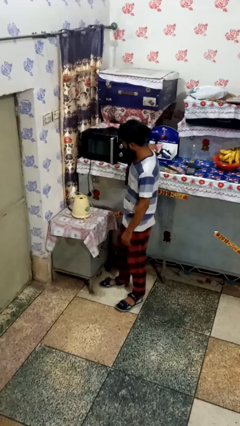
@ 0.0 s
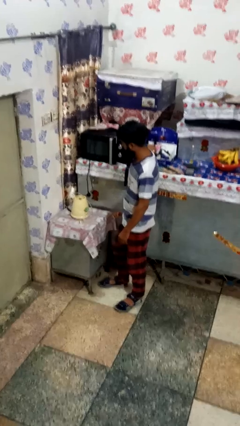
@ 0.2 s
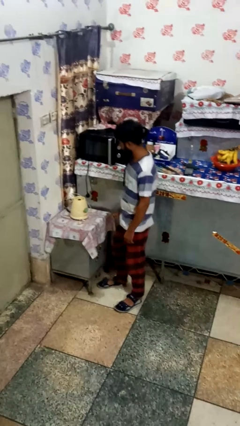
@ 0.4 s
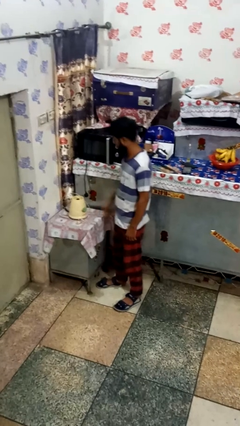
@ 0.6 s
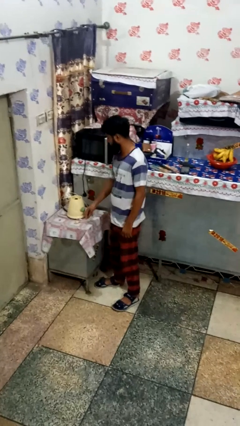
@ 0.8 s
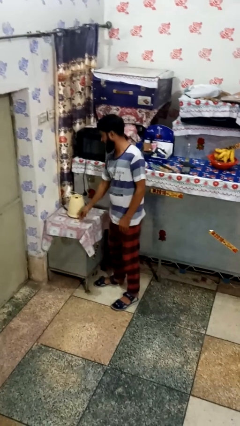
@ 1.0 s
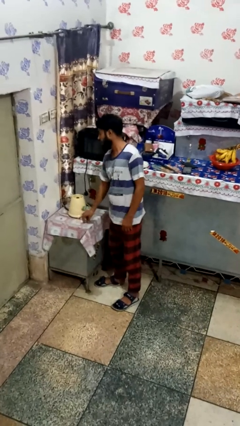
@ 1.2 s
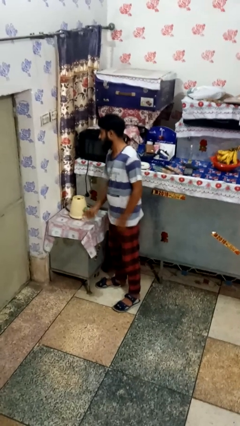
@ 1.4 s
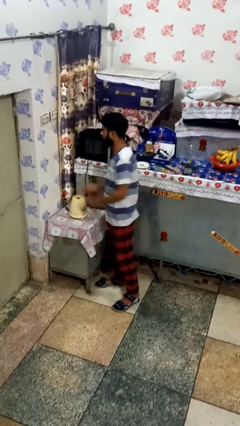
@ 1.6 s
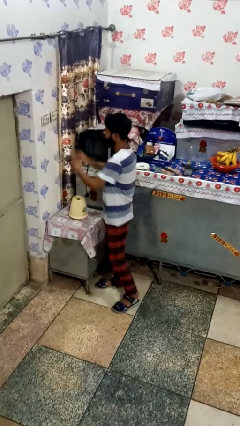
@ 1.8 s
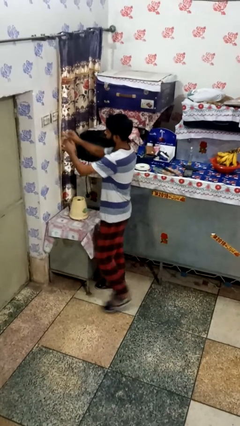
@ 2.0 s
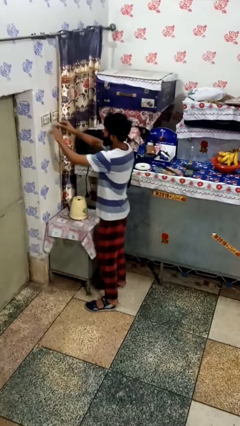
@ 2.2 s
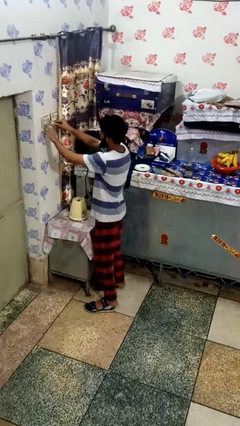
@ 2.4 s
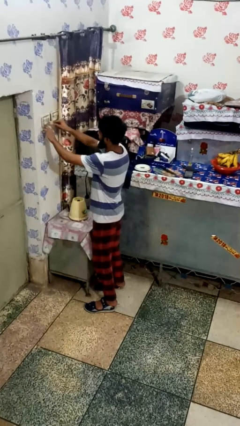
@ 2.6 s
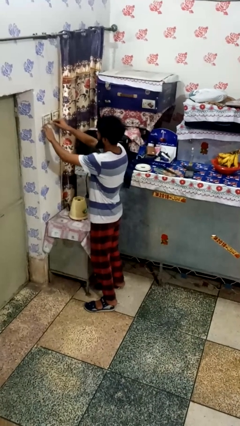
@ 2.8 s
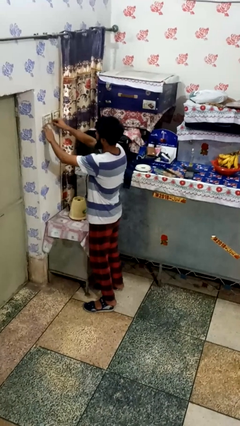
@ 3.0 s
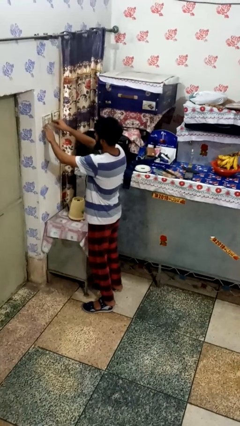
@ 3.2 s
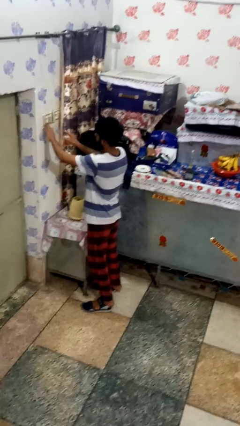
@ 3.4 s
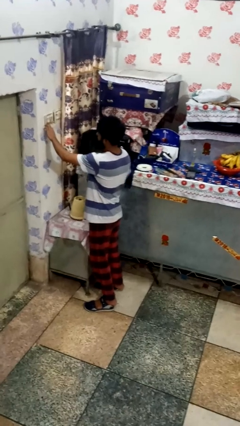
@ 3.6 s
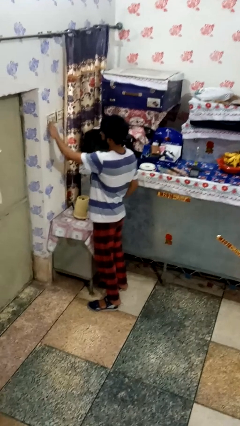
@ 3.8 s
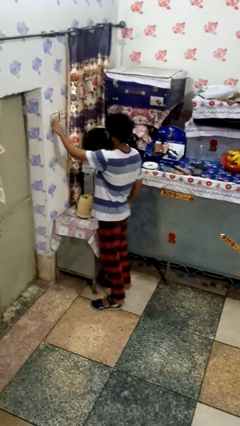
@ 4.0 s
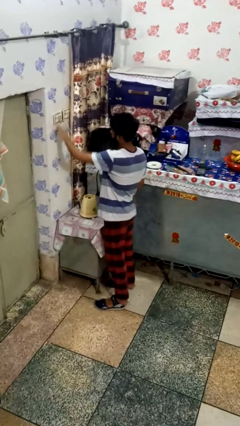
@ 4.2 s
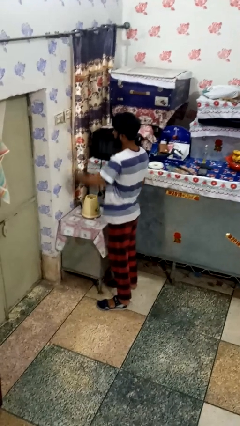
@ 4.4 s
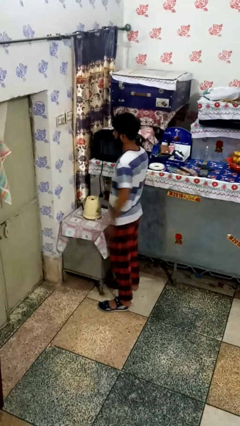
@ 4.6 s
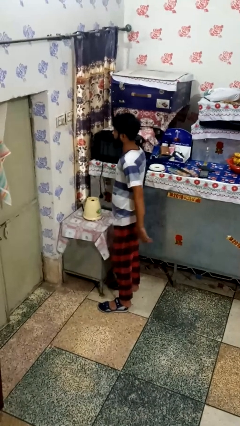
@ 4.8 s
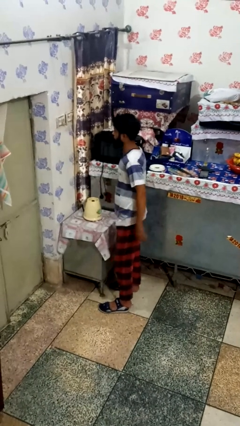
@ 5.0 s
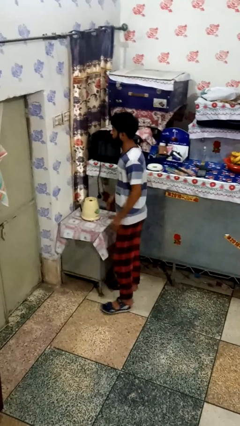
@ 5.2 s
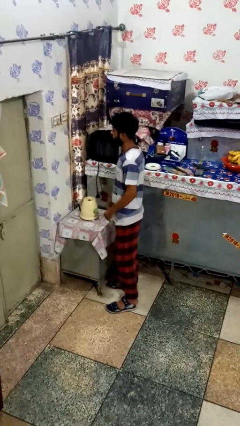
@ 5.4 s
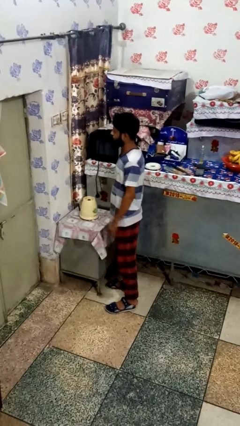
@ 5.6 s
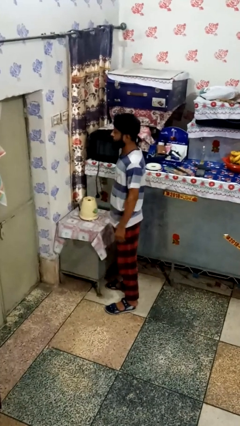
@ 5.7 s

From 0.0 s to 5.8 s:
person plugs into electrical socket

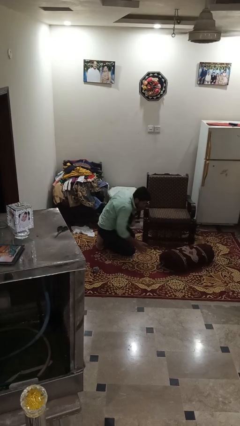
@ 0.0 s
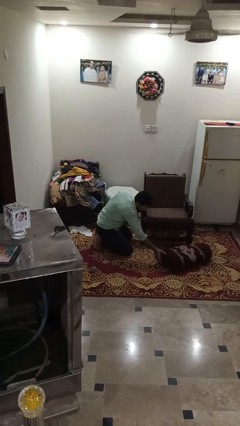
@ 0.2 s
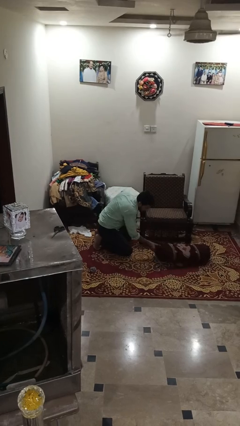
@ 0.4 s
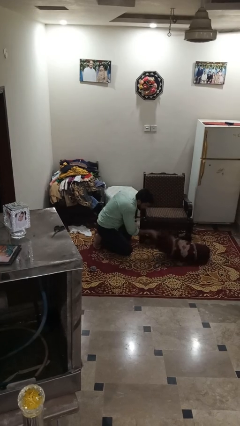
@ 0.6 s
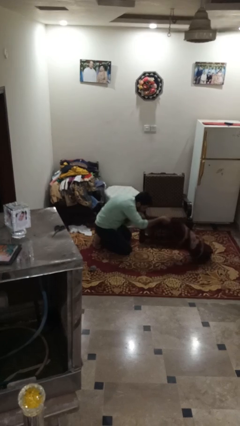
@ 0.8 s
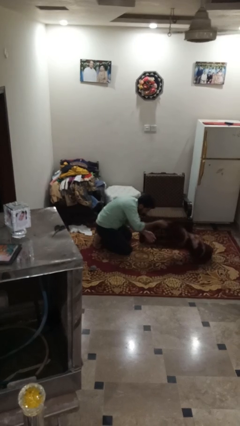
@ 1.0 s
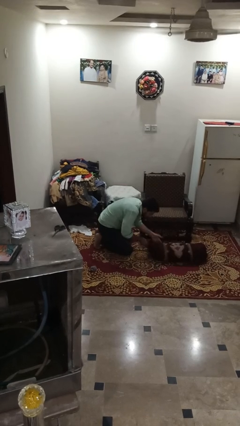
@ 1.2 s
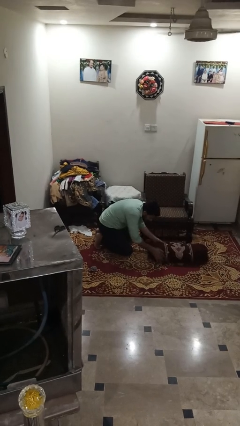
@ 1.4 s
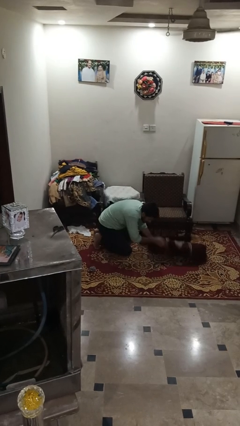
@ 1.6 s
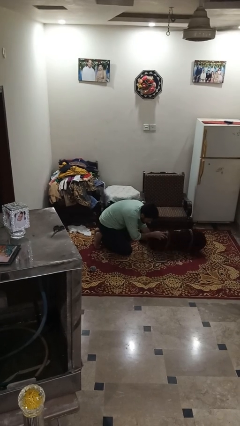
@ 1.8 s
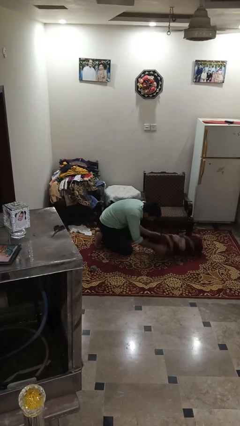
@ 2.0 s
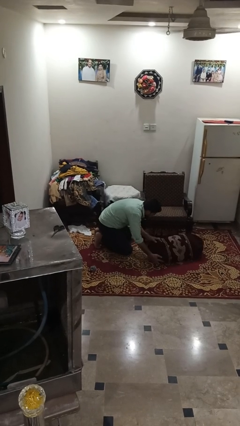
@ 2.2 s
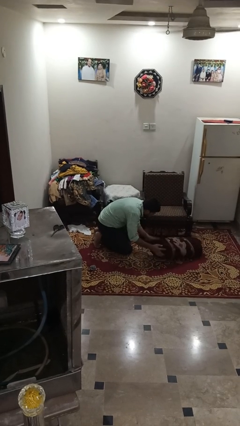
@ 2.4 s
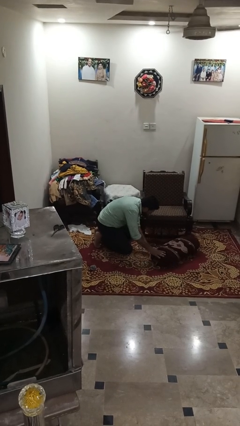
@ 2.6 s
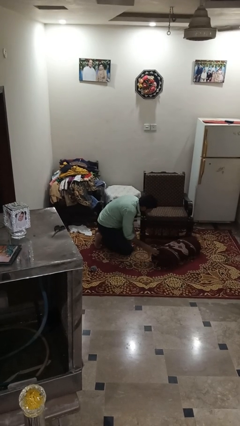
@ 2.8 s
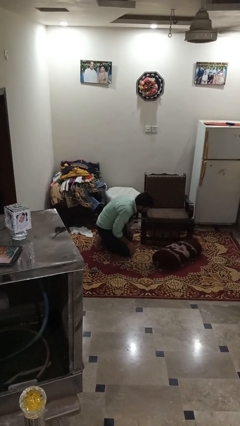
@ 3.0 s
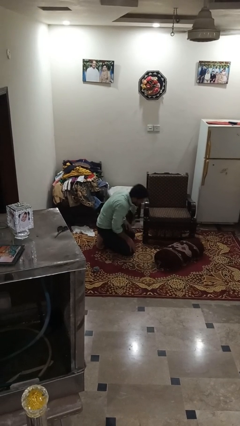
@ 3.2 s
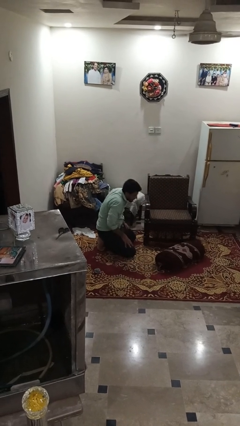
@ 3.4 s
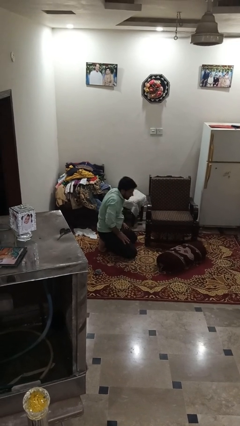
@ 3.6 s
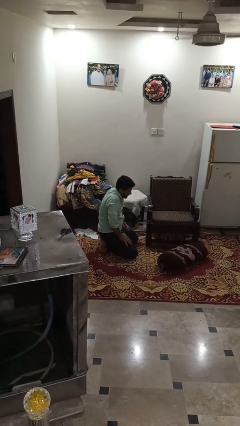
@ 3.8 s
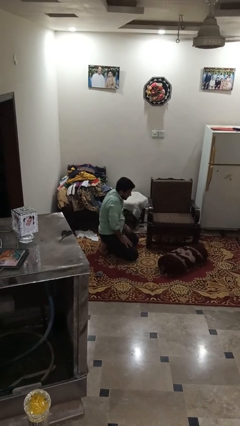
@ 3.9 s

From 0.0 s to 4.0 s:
person searches in couch

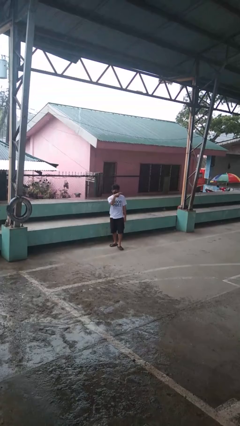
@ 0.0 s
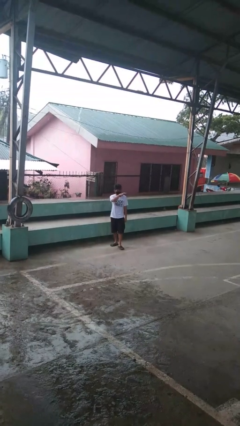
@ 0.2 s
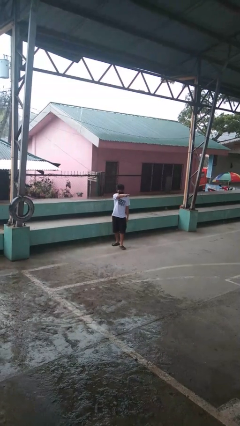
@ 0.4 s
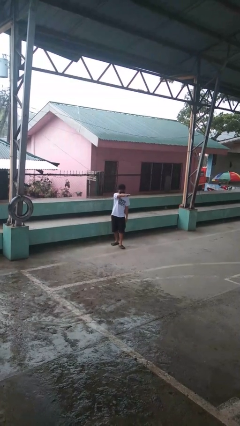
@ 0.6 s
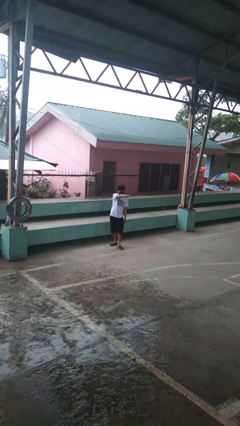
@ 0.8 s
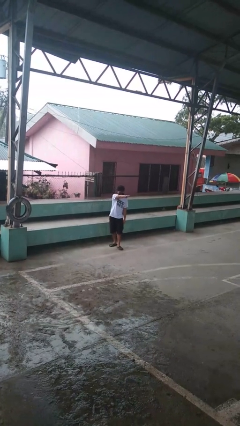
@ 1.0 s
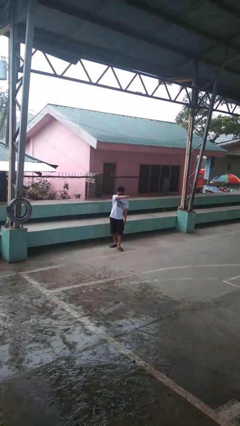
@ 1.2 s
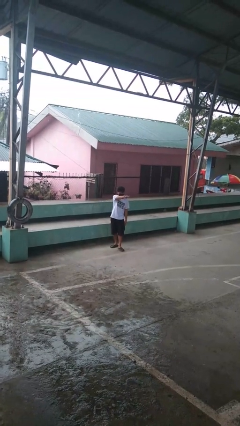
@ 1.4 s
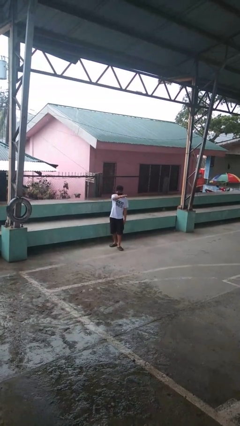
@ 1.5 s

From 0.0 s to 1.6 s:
person gestures watch closely

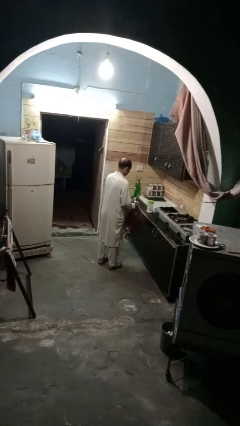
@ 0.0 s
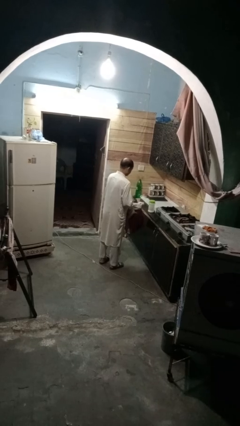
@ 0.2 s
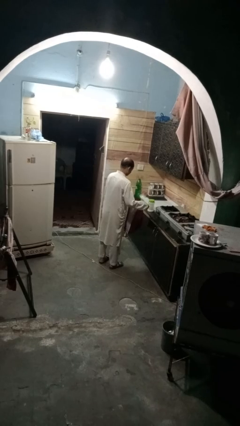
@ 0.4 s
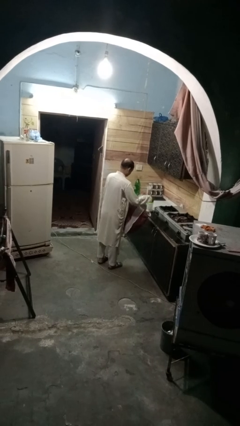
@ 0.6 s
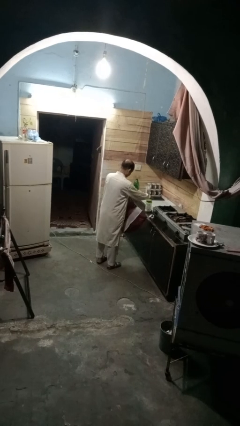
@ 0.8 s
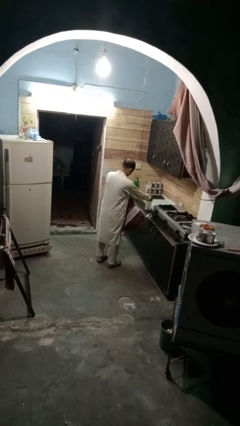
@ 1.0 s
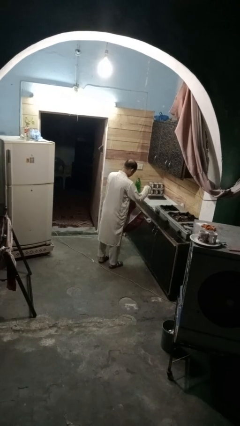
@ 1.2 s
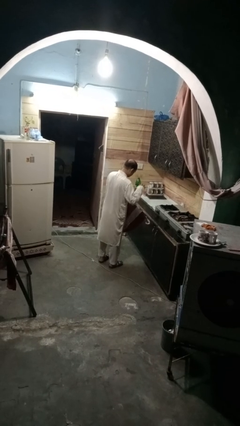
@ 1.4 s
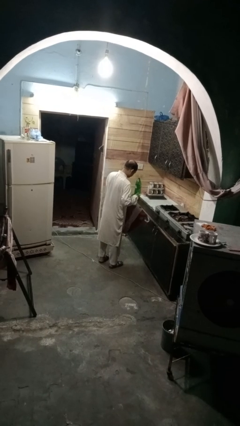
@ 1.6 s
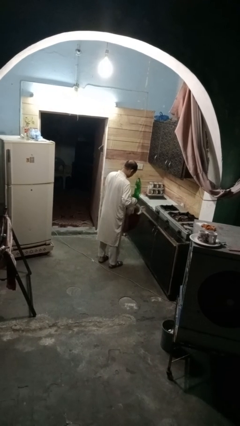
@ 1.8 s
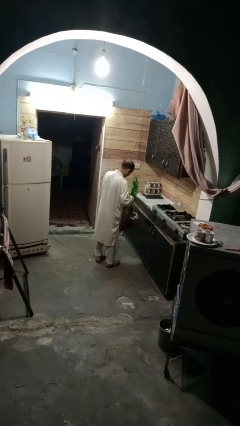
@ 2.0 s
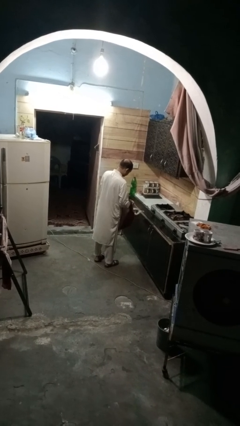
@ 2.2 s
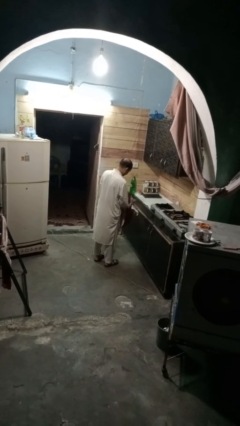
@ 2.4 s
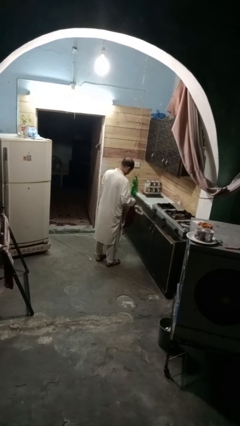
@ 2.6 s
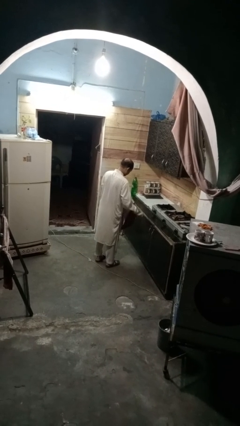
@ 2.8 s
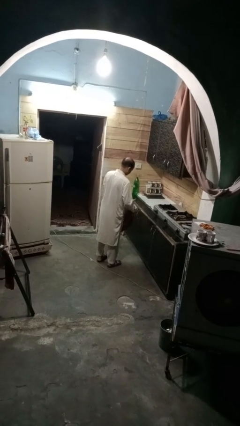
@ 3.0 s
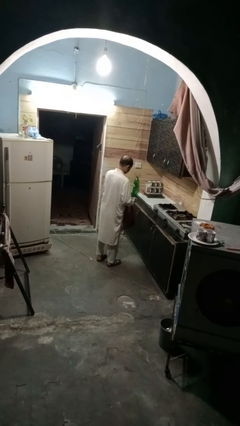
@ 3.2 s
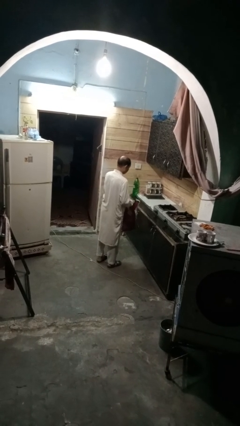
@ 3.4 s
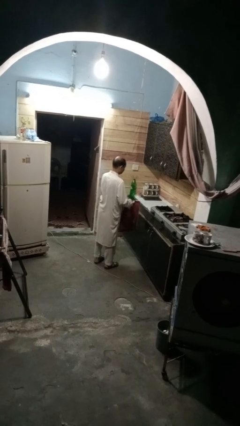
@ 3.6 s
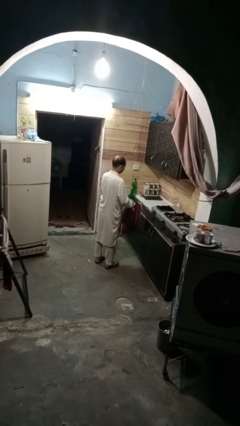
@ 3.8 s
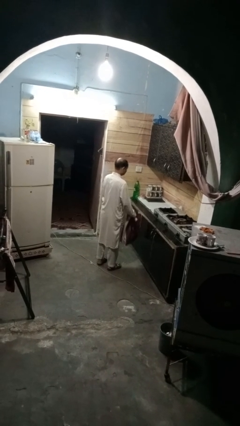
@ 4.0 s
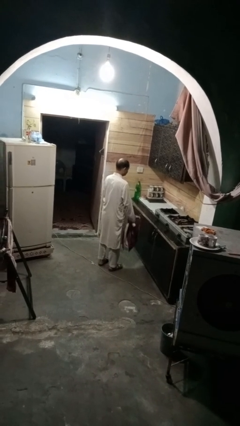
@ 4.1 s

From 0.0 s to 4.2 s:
person puts object into bag

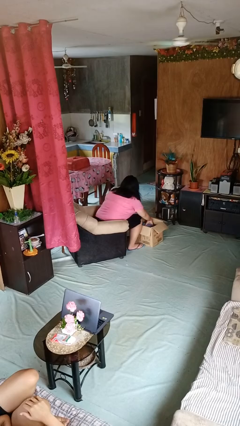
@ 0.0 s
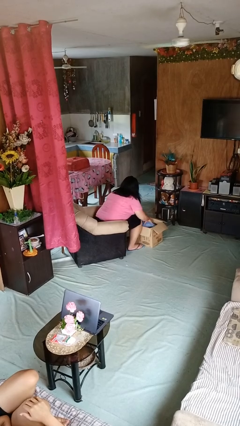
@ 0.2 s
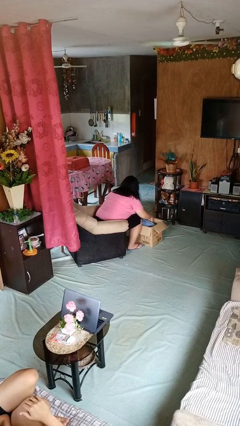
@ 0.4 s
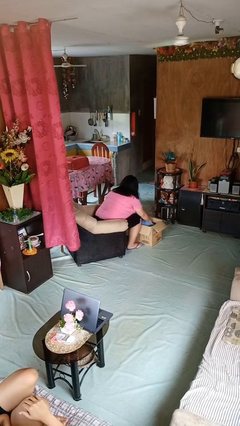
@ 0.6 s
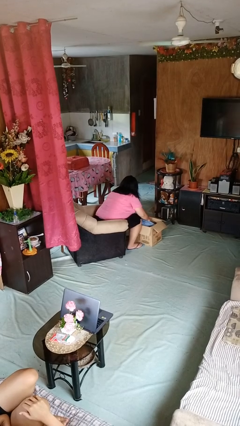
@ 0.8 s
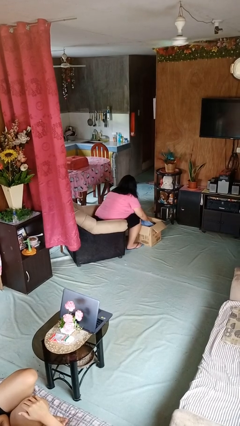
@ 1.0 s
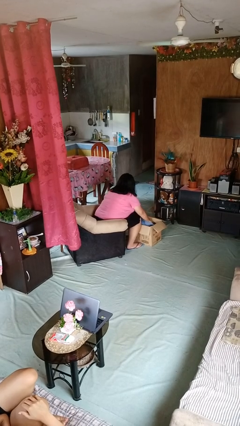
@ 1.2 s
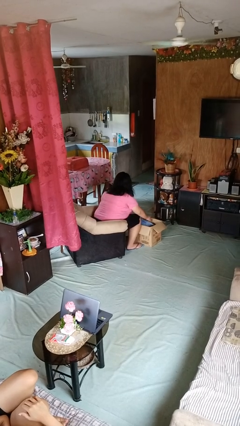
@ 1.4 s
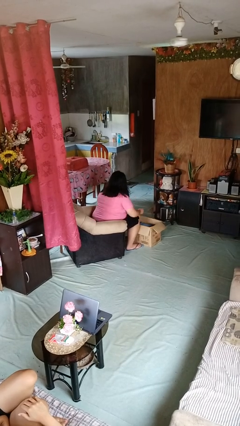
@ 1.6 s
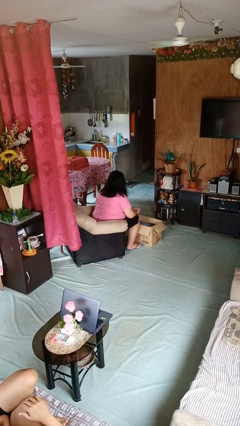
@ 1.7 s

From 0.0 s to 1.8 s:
person searches in box

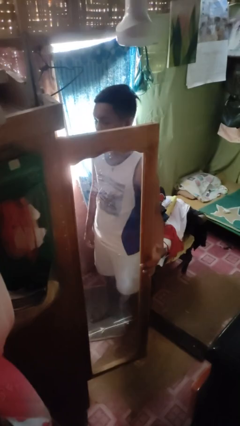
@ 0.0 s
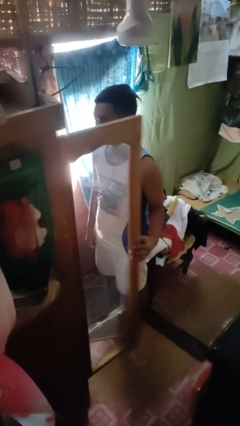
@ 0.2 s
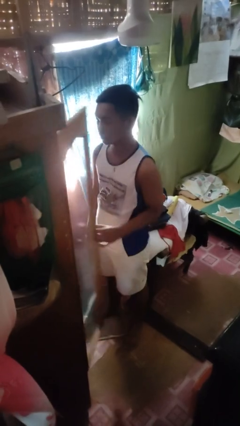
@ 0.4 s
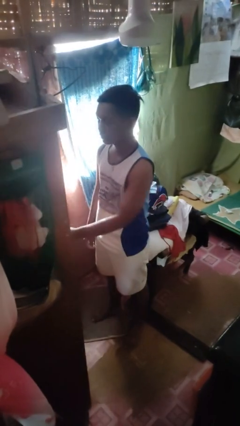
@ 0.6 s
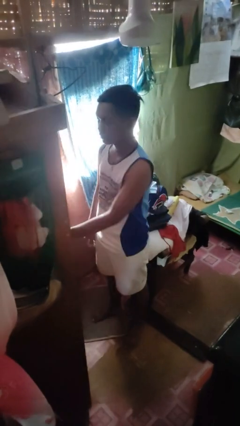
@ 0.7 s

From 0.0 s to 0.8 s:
person closes closet door
